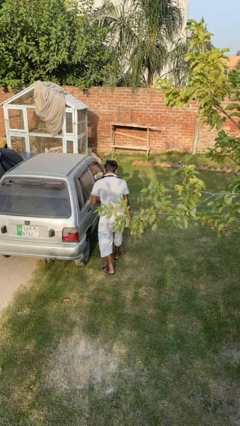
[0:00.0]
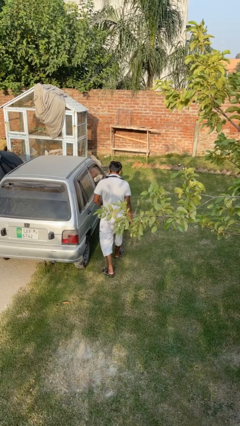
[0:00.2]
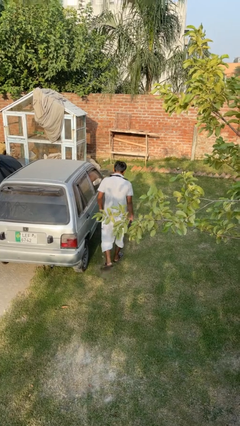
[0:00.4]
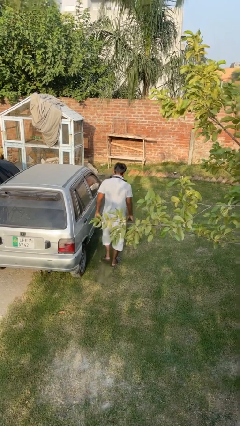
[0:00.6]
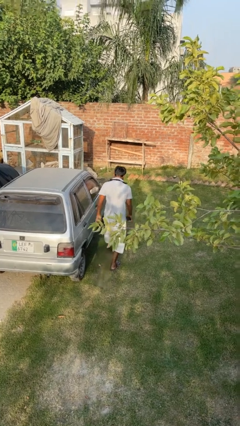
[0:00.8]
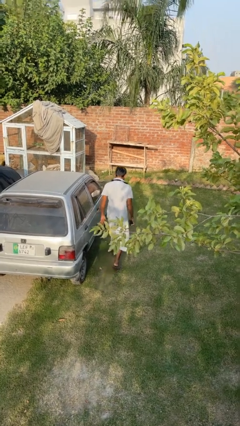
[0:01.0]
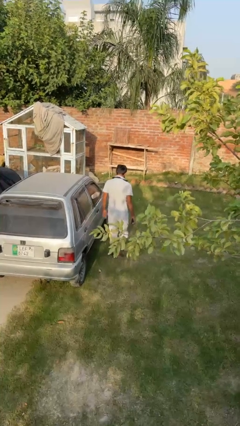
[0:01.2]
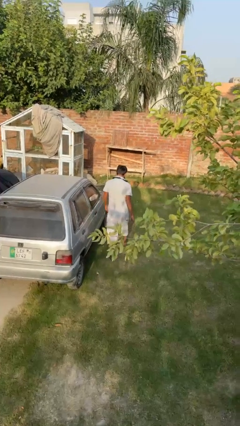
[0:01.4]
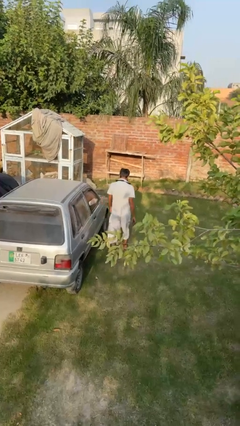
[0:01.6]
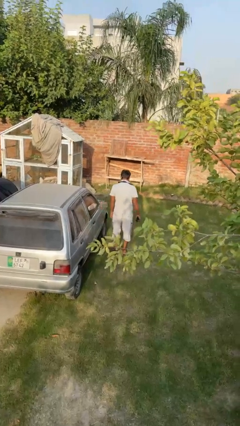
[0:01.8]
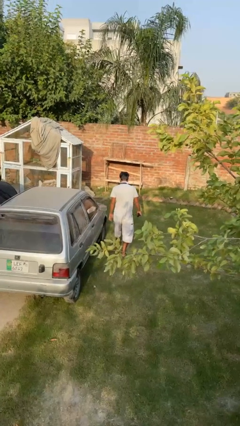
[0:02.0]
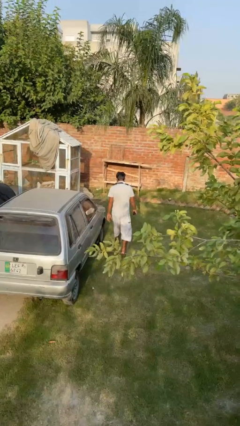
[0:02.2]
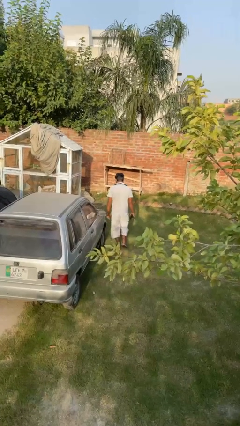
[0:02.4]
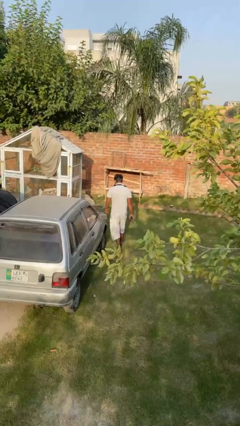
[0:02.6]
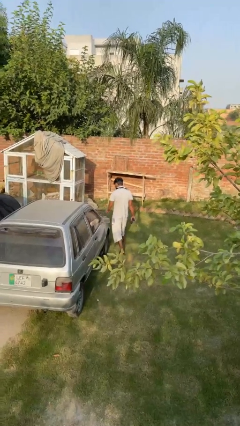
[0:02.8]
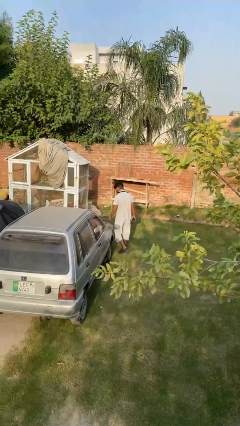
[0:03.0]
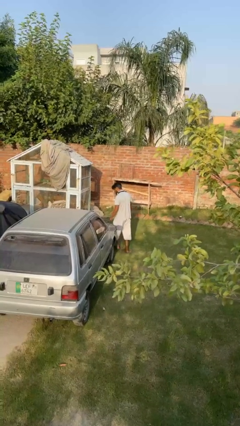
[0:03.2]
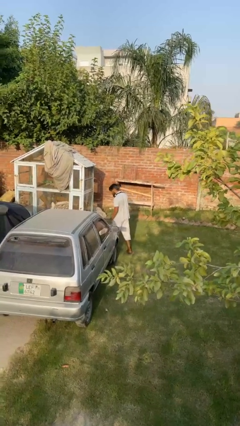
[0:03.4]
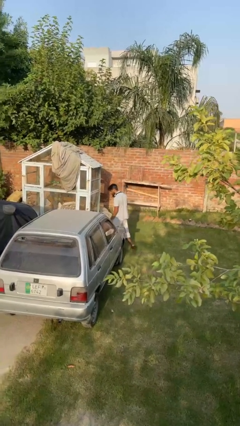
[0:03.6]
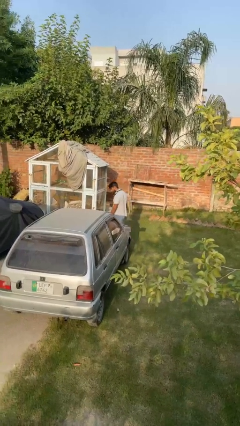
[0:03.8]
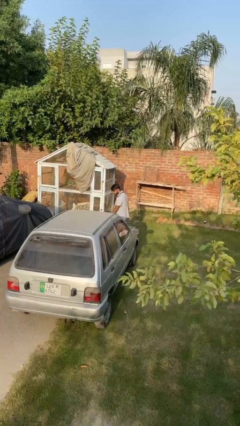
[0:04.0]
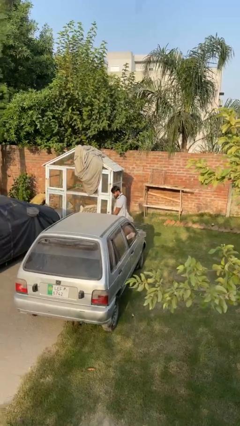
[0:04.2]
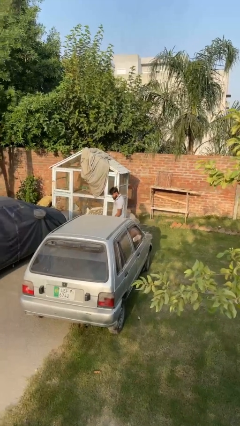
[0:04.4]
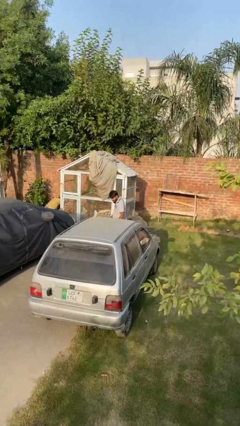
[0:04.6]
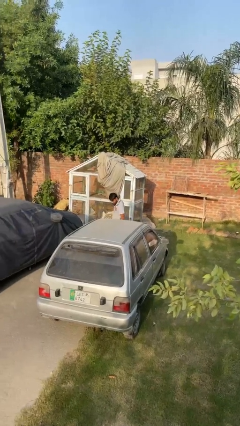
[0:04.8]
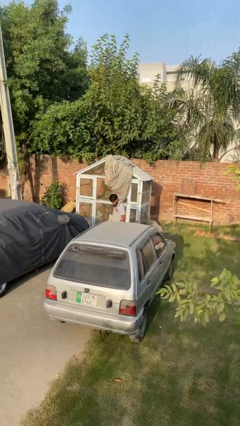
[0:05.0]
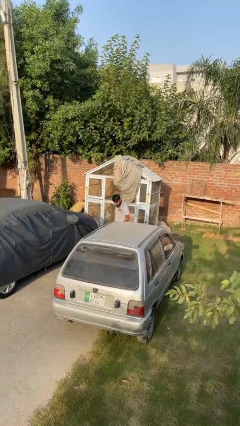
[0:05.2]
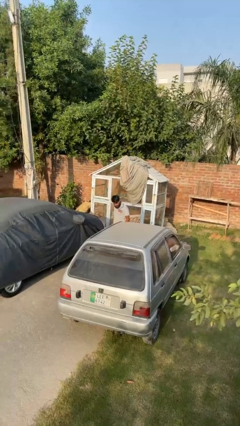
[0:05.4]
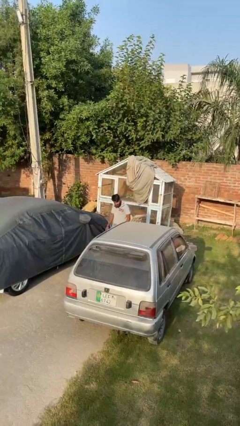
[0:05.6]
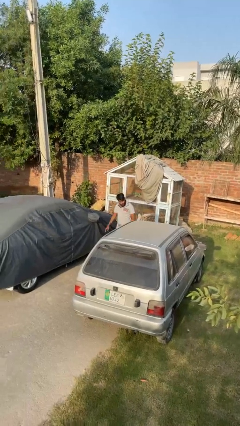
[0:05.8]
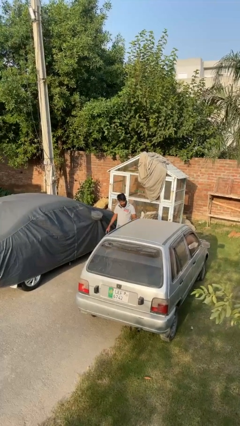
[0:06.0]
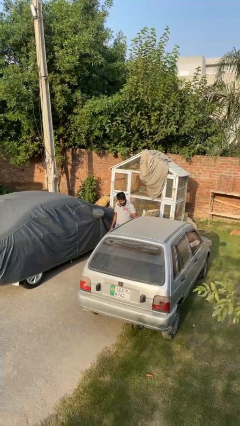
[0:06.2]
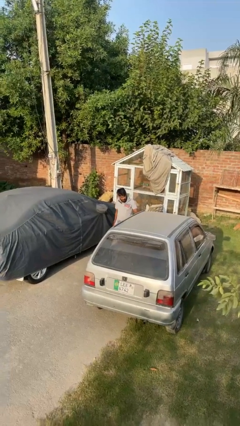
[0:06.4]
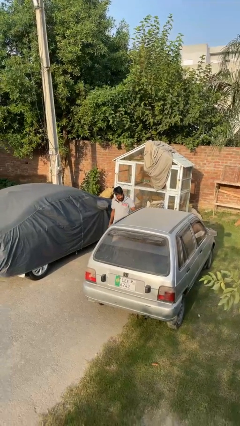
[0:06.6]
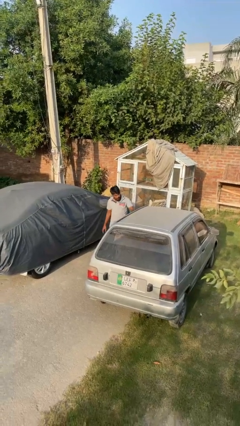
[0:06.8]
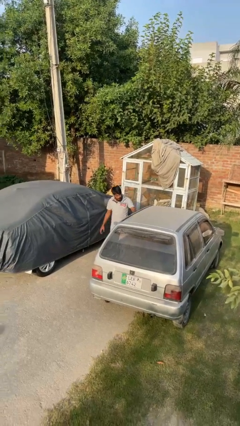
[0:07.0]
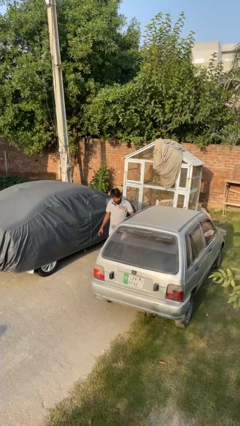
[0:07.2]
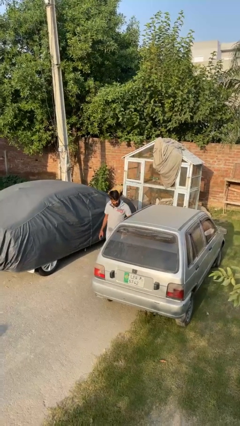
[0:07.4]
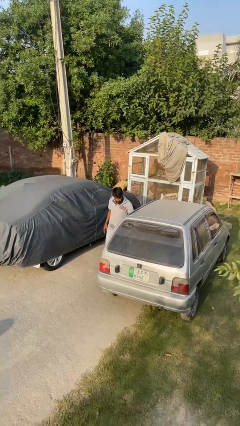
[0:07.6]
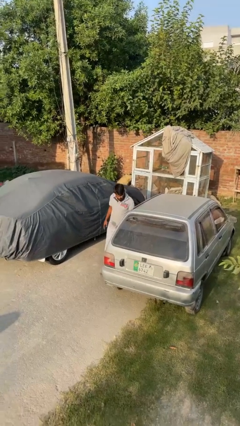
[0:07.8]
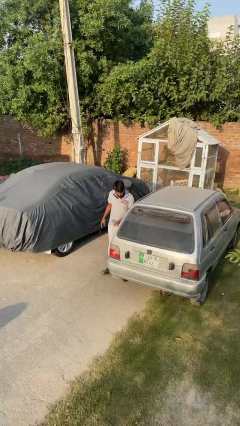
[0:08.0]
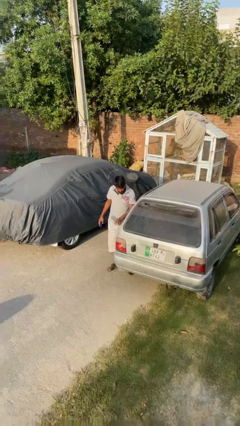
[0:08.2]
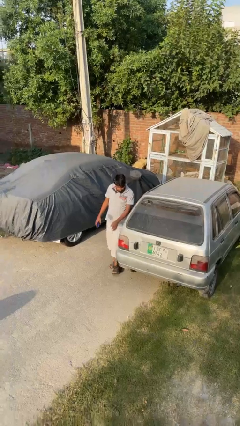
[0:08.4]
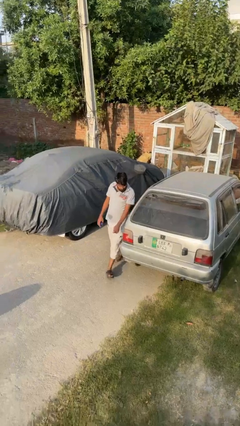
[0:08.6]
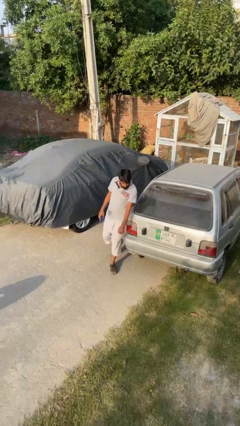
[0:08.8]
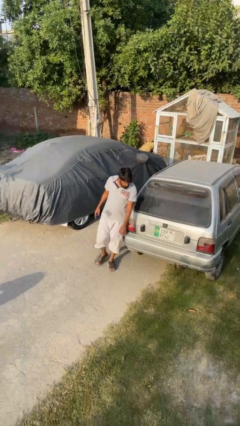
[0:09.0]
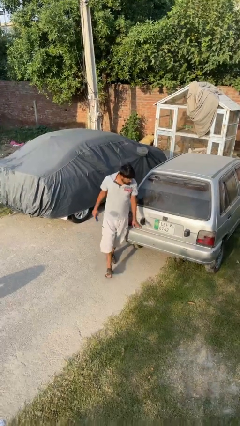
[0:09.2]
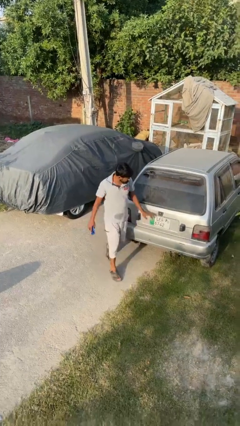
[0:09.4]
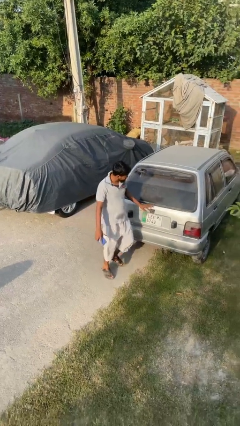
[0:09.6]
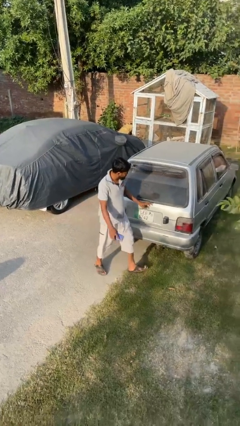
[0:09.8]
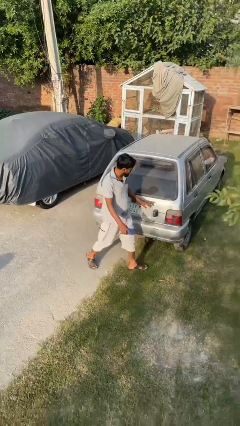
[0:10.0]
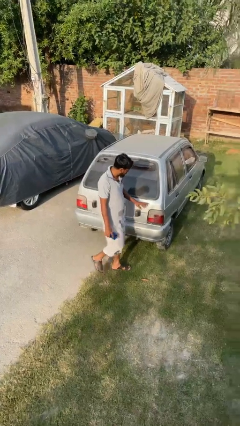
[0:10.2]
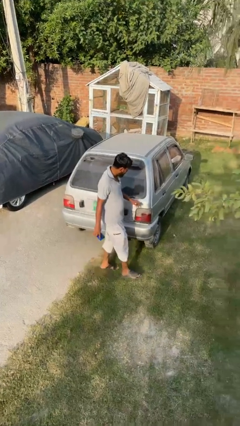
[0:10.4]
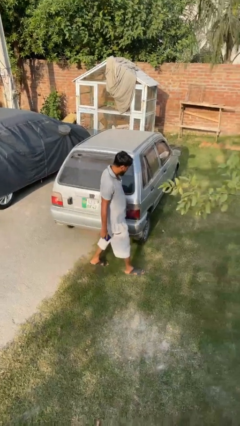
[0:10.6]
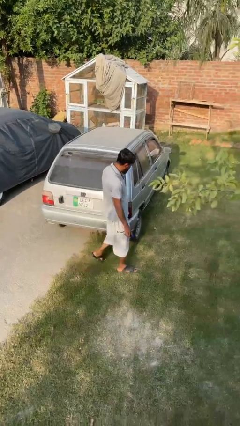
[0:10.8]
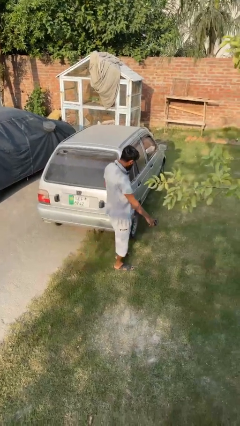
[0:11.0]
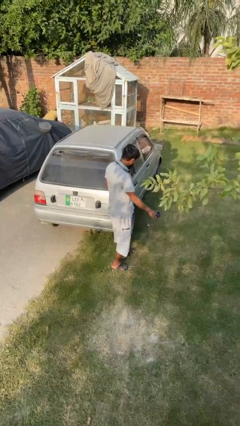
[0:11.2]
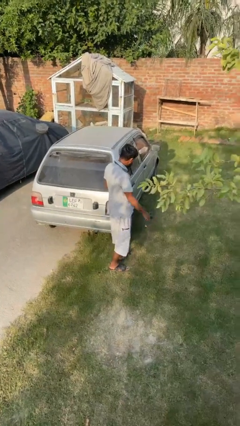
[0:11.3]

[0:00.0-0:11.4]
person walks around car

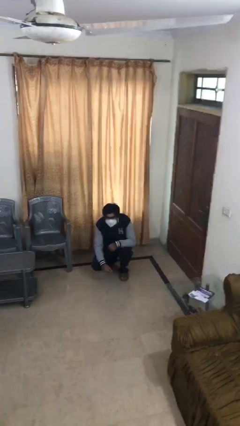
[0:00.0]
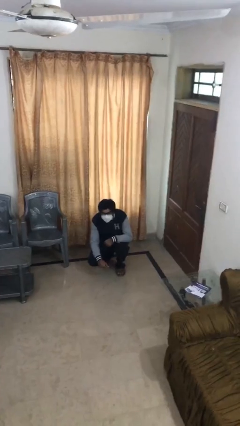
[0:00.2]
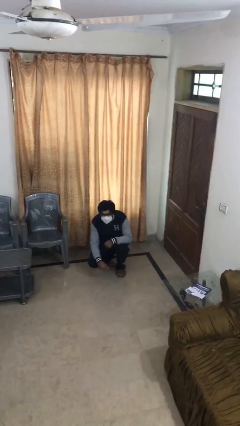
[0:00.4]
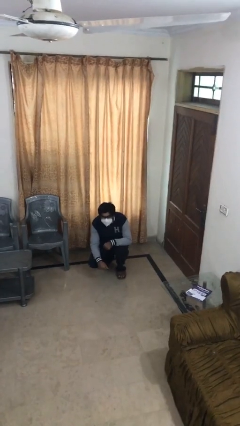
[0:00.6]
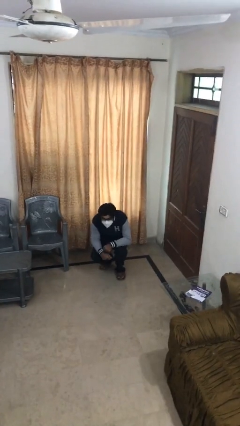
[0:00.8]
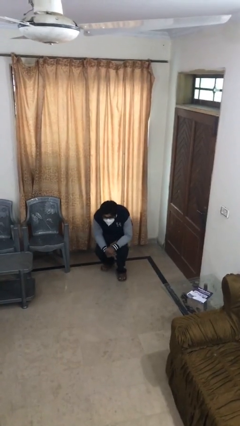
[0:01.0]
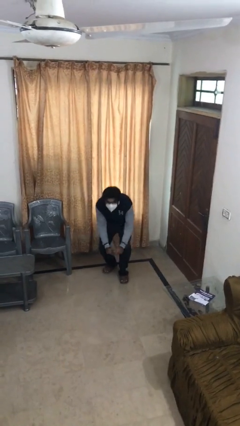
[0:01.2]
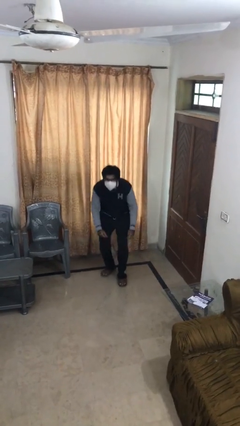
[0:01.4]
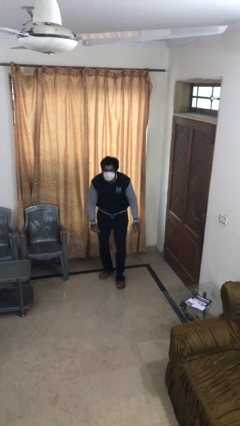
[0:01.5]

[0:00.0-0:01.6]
person stands up

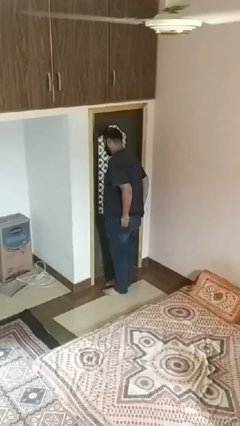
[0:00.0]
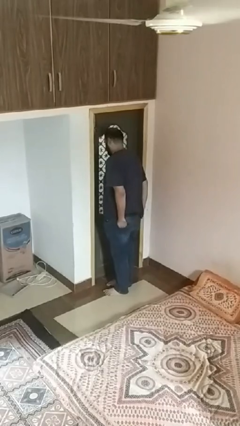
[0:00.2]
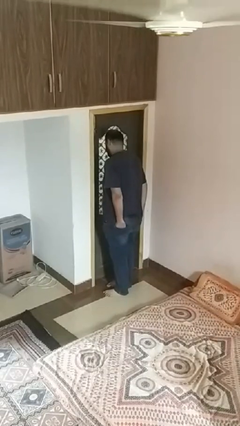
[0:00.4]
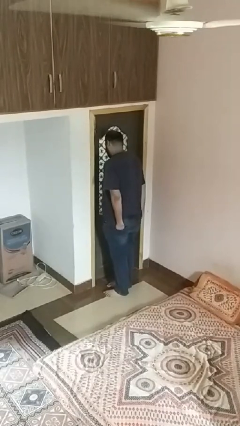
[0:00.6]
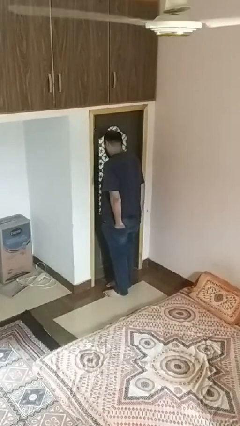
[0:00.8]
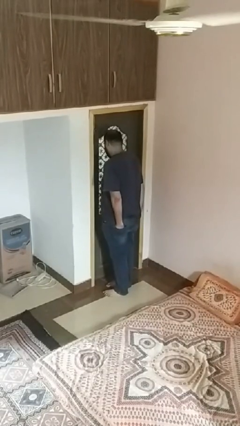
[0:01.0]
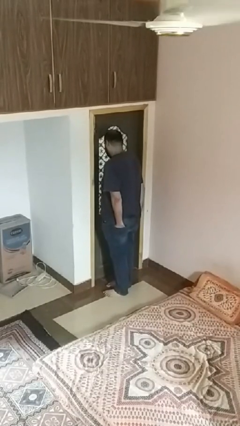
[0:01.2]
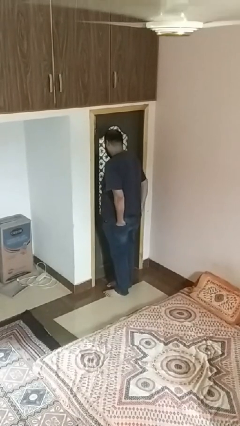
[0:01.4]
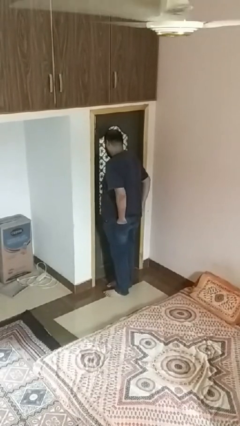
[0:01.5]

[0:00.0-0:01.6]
person puts hands in back pockets

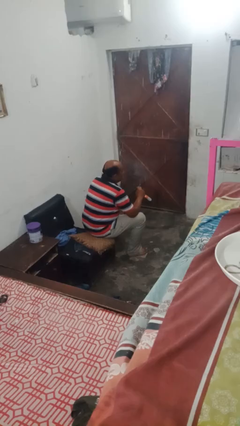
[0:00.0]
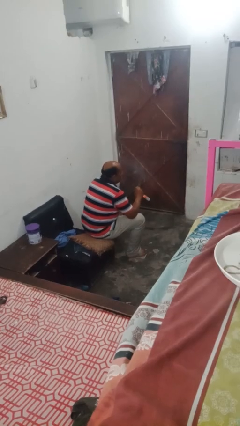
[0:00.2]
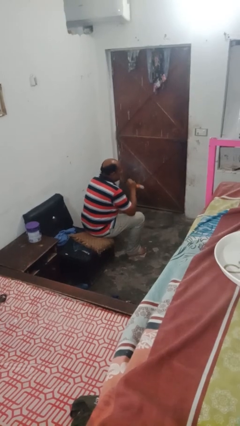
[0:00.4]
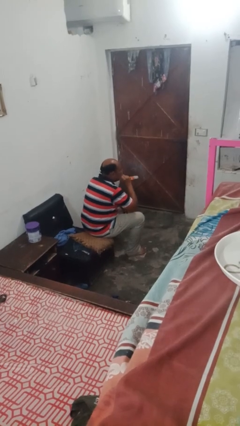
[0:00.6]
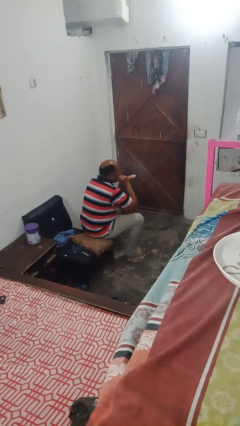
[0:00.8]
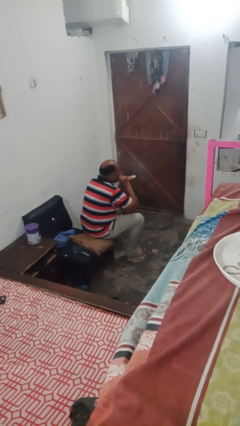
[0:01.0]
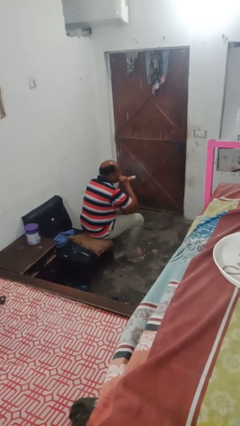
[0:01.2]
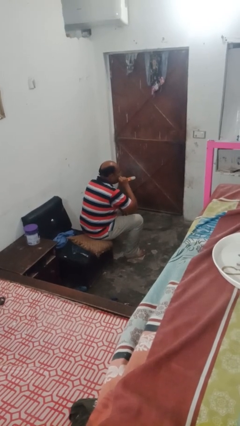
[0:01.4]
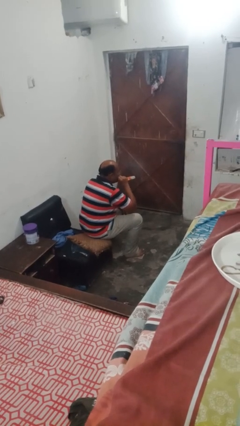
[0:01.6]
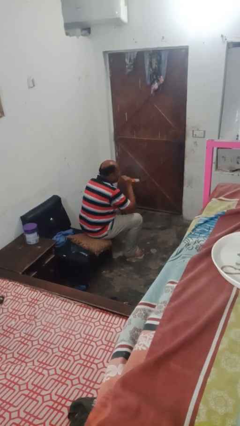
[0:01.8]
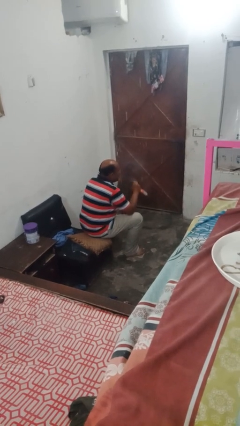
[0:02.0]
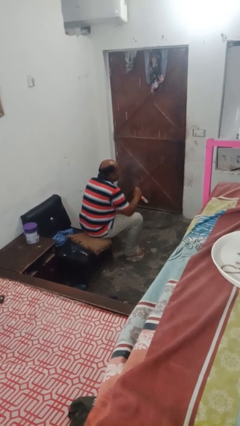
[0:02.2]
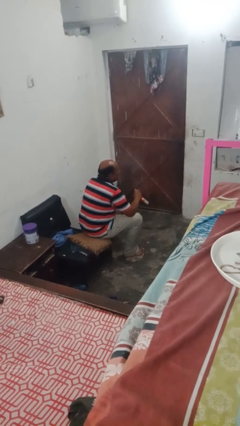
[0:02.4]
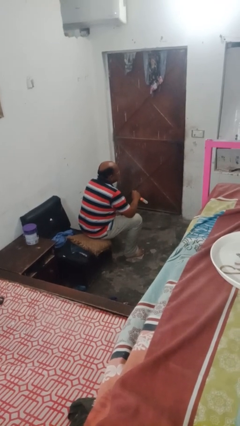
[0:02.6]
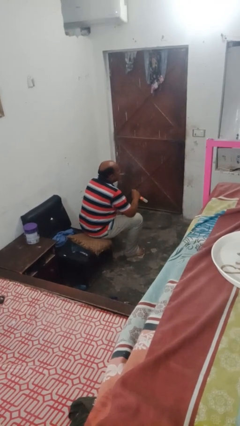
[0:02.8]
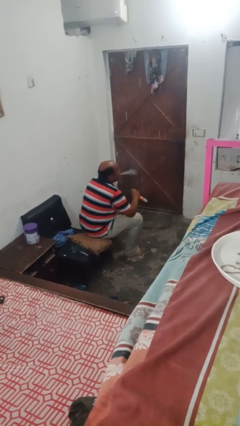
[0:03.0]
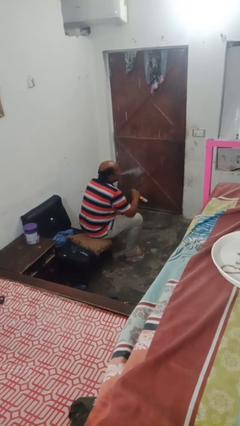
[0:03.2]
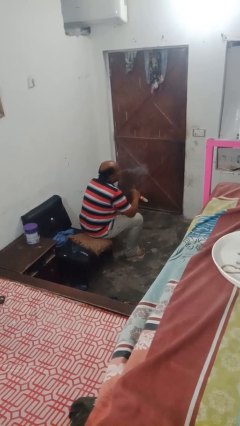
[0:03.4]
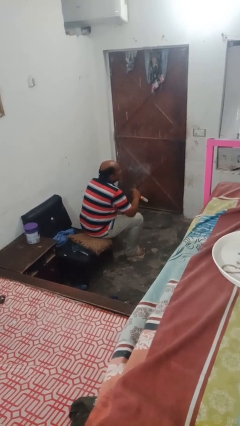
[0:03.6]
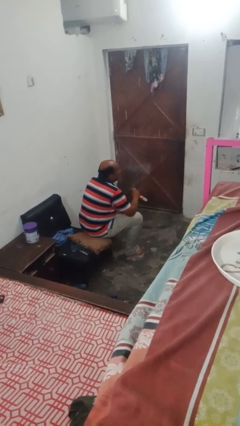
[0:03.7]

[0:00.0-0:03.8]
person vapes
